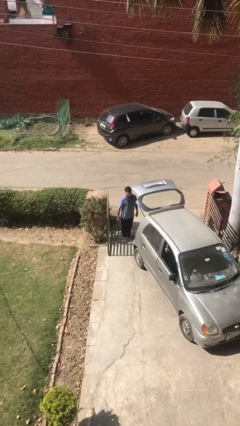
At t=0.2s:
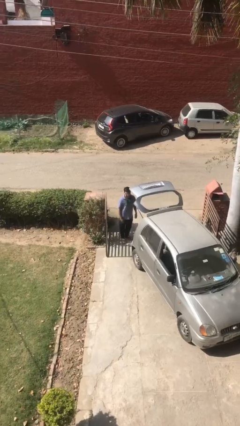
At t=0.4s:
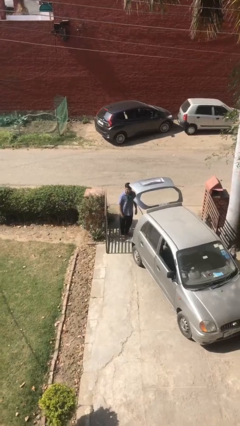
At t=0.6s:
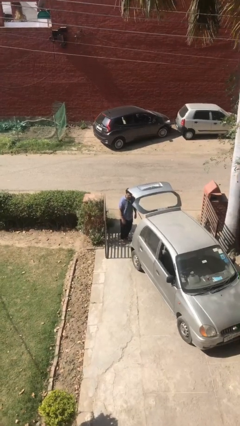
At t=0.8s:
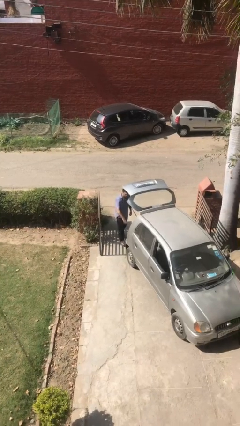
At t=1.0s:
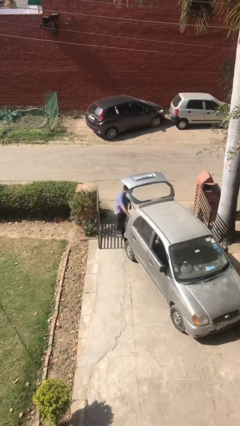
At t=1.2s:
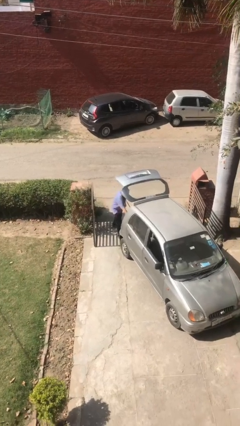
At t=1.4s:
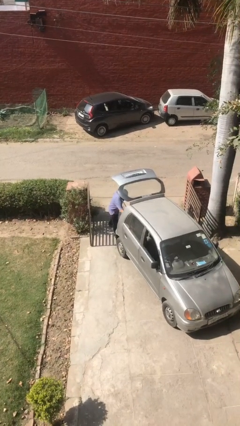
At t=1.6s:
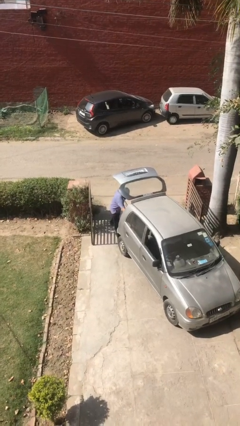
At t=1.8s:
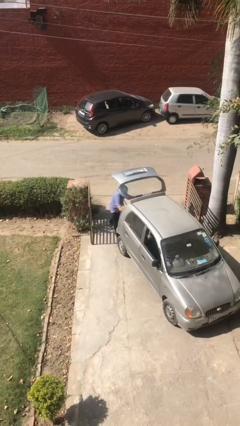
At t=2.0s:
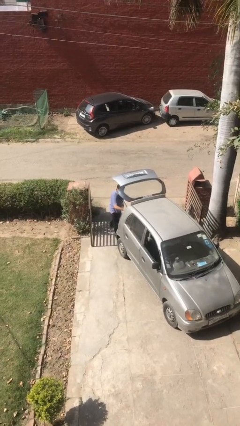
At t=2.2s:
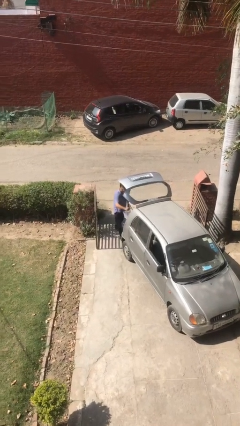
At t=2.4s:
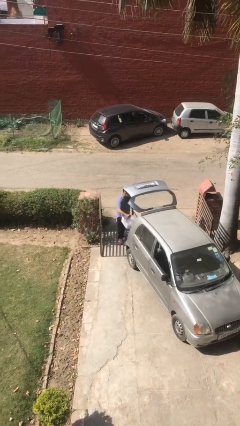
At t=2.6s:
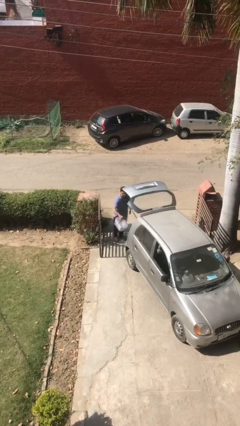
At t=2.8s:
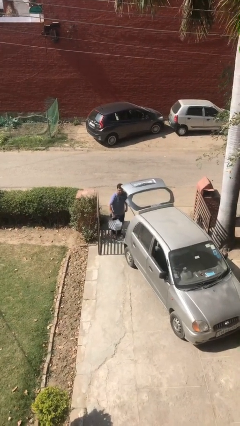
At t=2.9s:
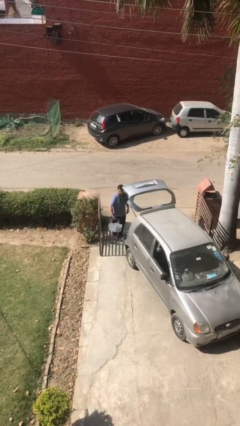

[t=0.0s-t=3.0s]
person unloads car

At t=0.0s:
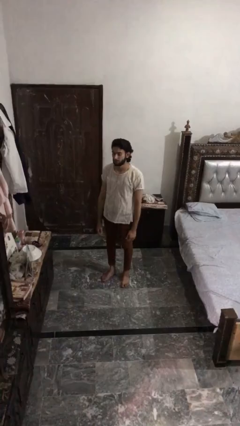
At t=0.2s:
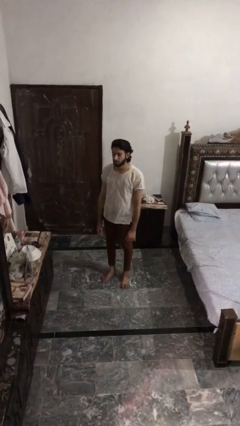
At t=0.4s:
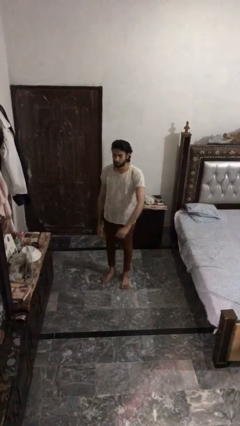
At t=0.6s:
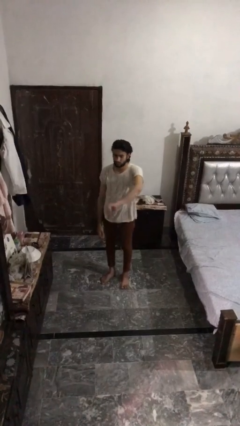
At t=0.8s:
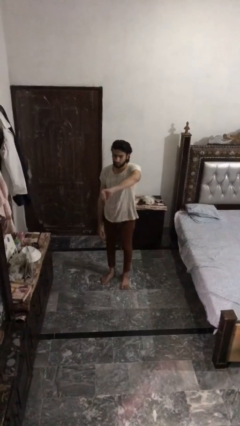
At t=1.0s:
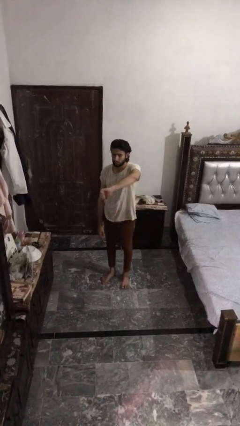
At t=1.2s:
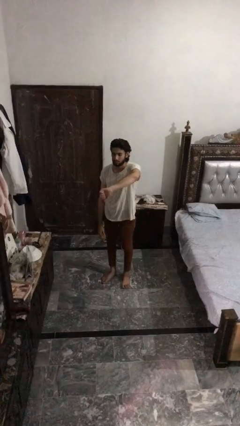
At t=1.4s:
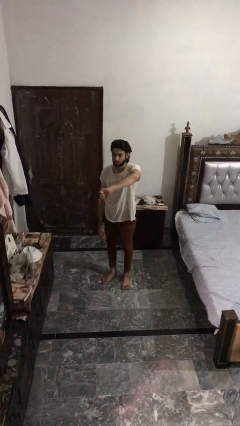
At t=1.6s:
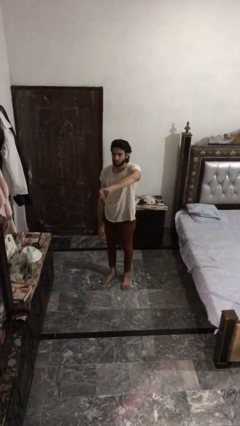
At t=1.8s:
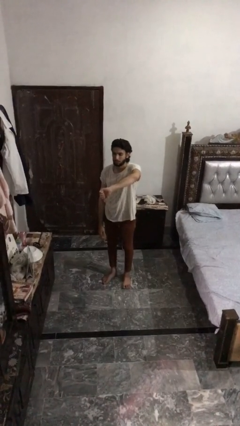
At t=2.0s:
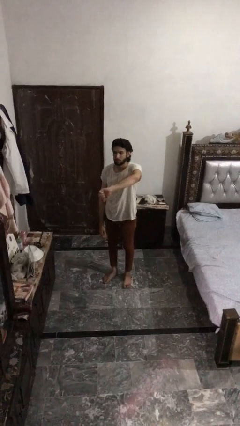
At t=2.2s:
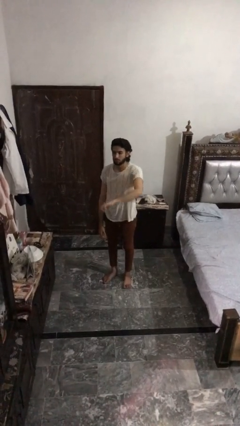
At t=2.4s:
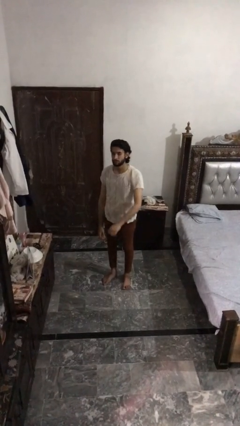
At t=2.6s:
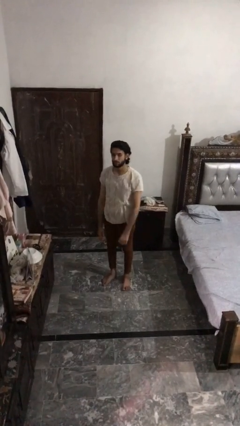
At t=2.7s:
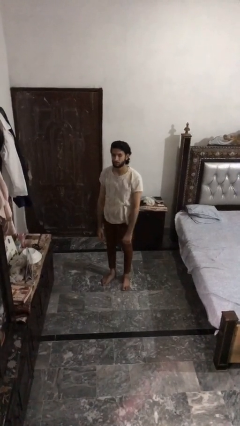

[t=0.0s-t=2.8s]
person gestures thumbs down

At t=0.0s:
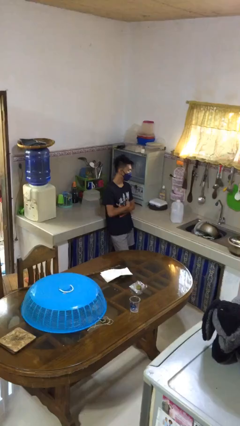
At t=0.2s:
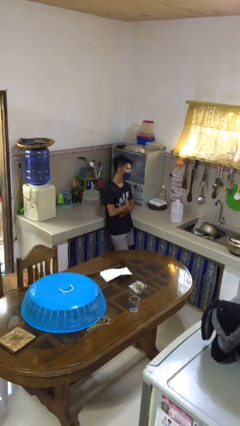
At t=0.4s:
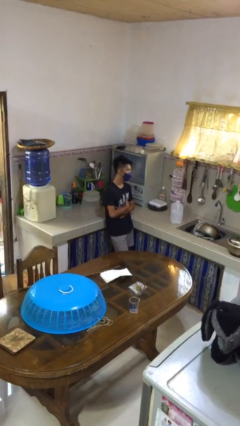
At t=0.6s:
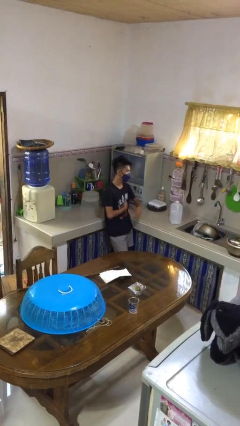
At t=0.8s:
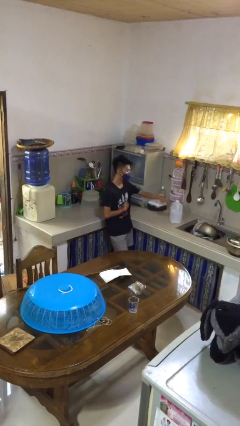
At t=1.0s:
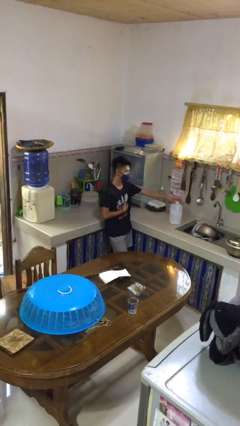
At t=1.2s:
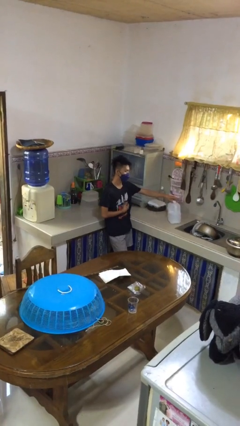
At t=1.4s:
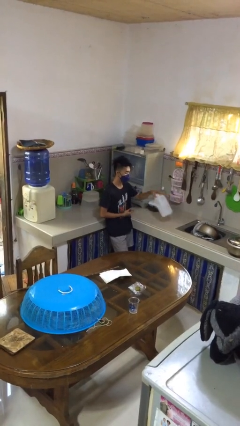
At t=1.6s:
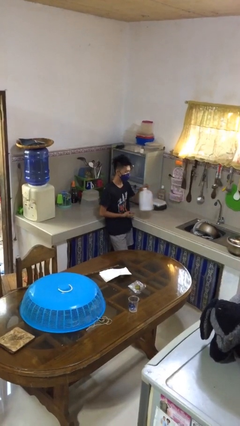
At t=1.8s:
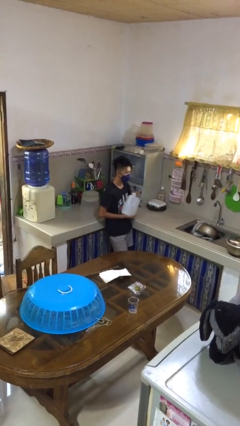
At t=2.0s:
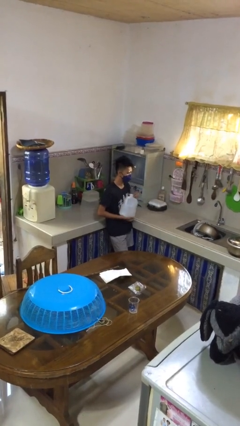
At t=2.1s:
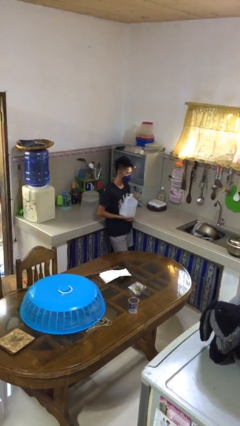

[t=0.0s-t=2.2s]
person puts down object on countertop

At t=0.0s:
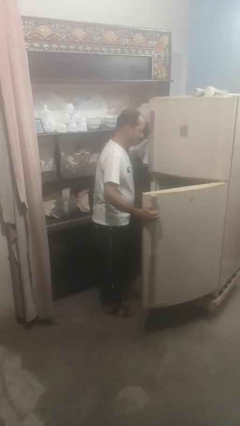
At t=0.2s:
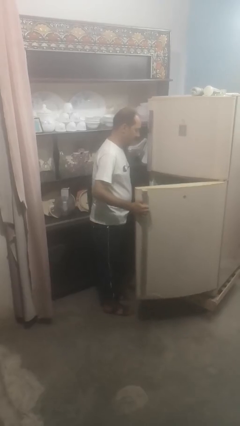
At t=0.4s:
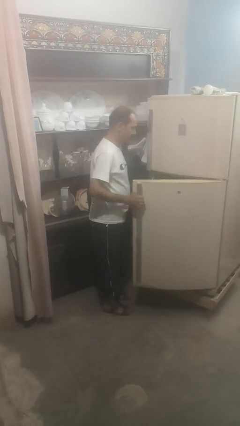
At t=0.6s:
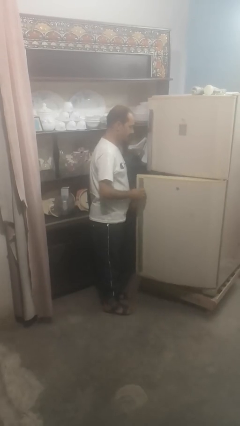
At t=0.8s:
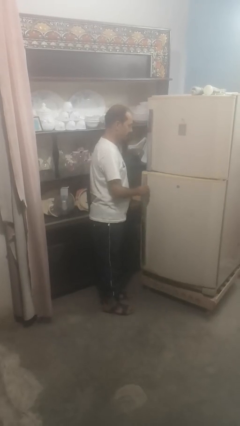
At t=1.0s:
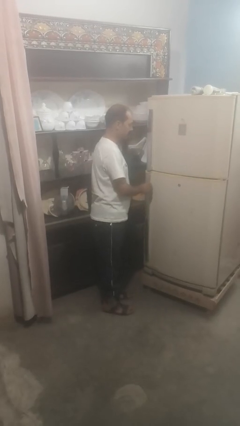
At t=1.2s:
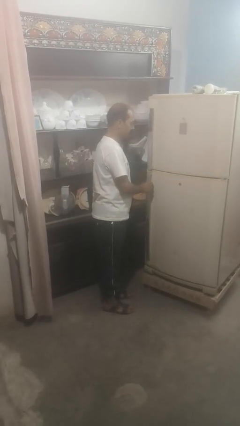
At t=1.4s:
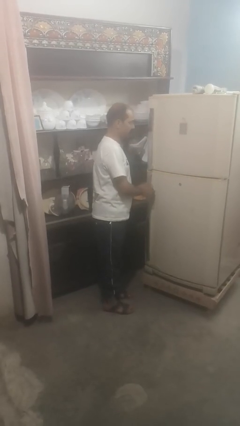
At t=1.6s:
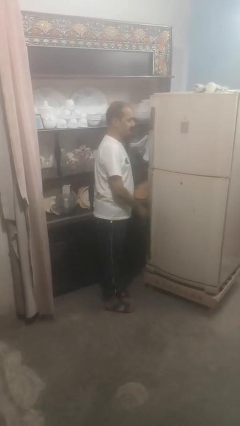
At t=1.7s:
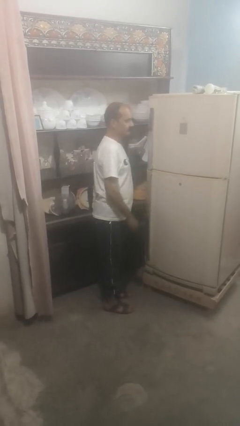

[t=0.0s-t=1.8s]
person closes refrigerator

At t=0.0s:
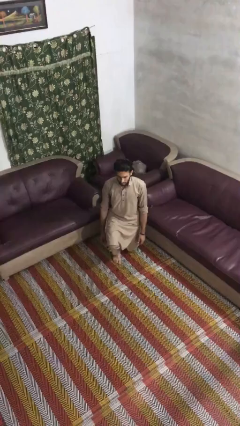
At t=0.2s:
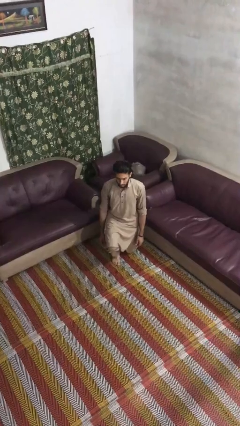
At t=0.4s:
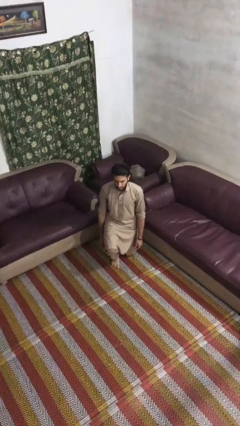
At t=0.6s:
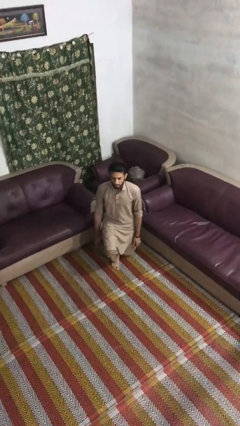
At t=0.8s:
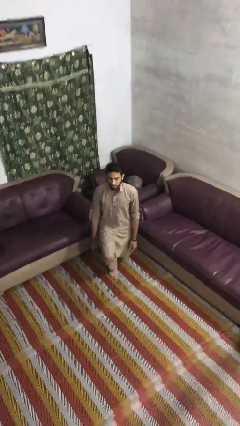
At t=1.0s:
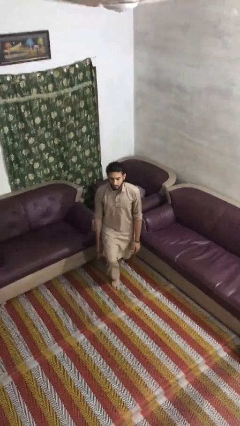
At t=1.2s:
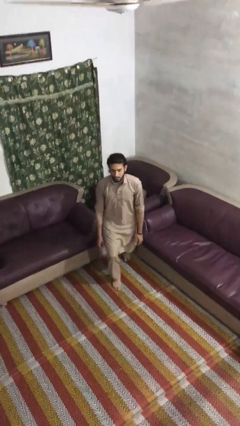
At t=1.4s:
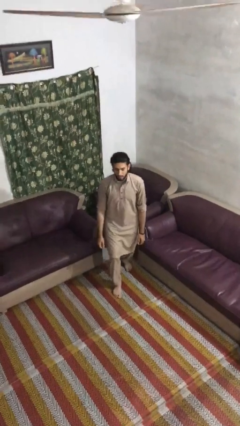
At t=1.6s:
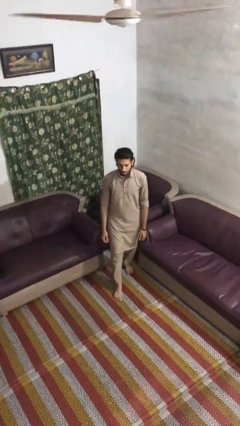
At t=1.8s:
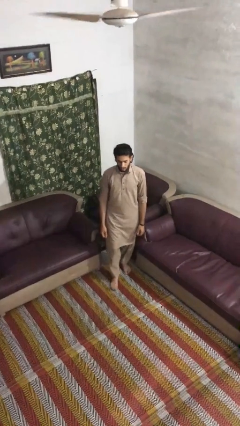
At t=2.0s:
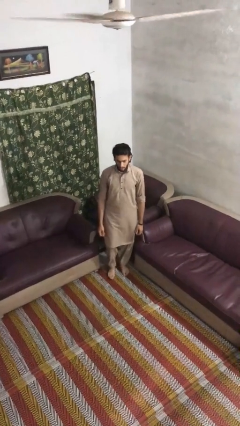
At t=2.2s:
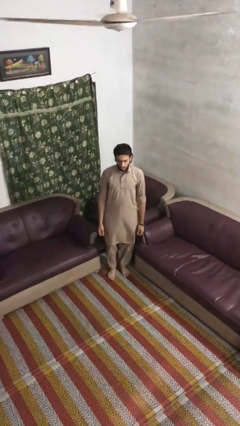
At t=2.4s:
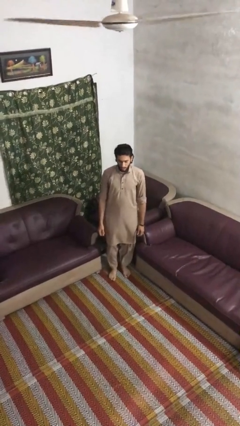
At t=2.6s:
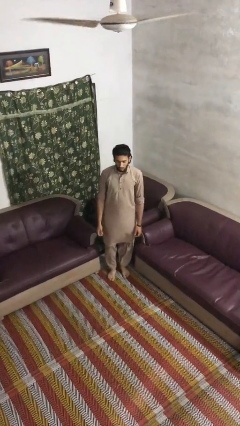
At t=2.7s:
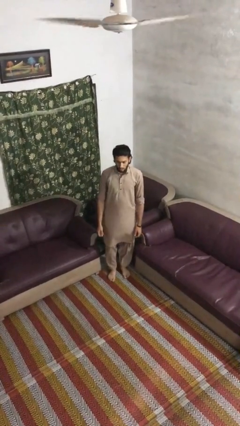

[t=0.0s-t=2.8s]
person stands up from floor

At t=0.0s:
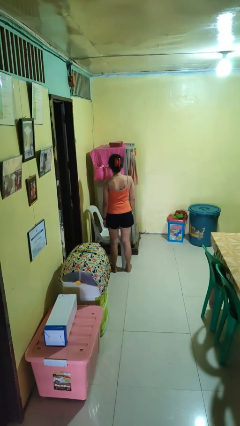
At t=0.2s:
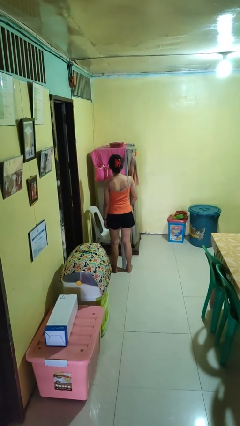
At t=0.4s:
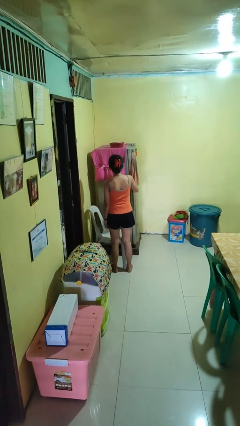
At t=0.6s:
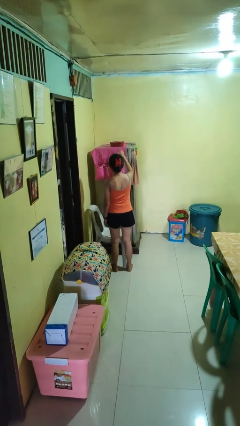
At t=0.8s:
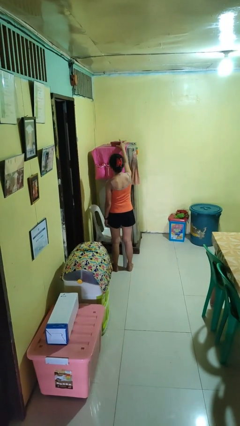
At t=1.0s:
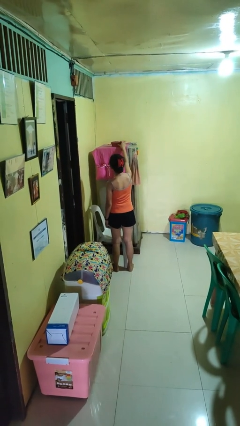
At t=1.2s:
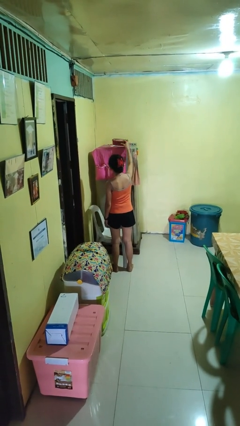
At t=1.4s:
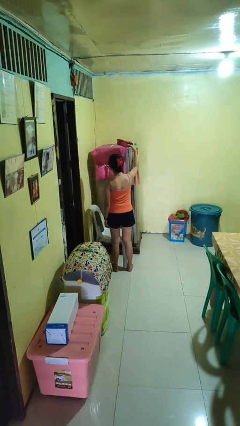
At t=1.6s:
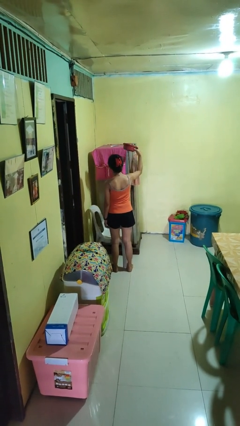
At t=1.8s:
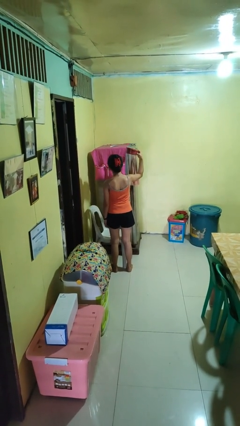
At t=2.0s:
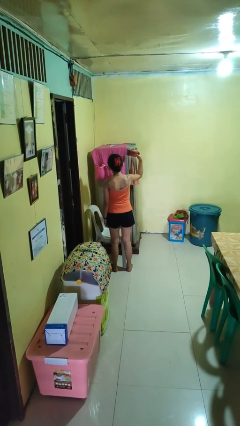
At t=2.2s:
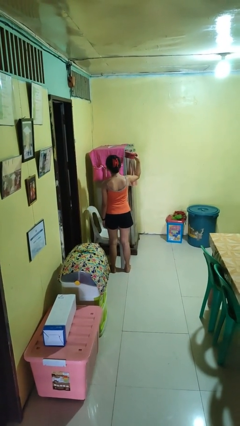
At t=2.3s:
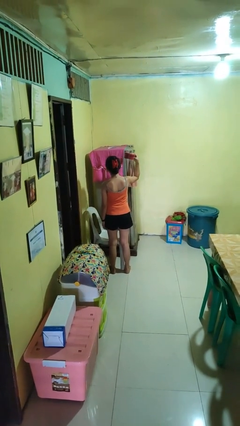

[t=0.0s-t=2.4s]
person picks up object from shelf

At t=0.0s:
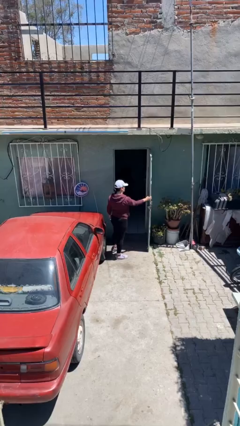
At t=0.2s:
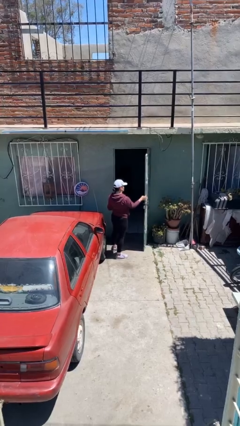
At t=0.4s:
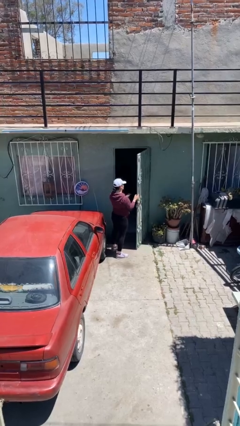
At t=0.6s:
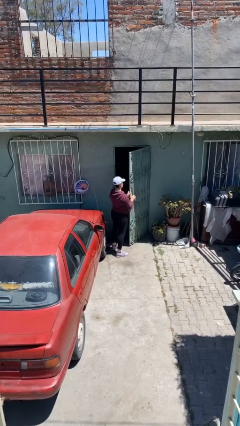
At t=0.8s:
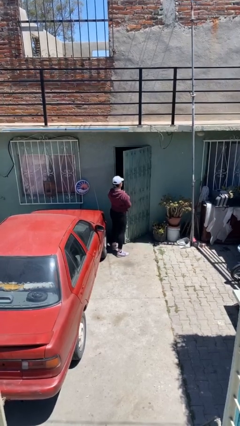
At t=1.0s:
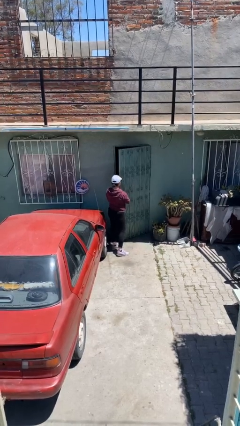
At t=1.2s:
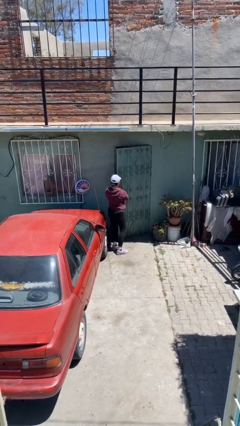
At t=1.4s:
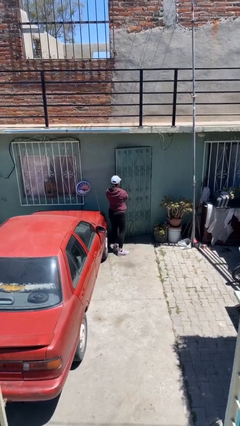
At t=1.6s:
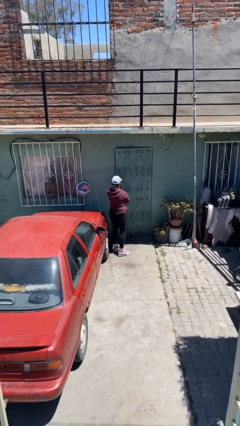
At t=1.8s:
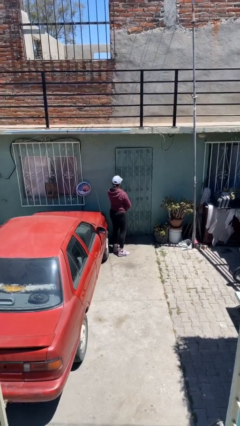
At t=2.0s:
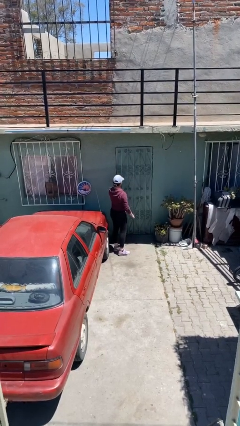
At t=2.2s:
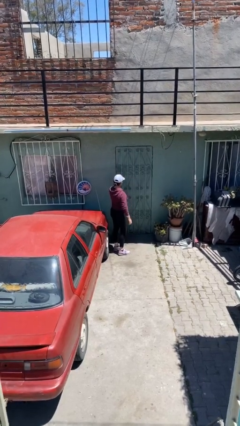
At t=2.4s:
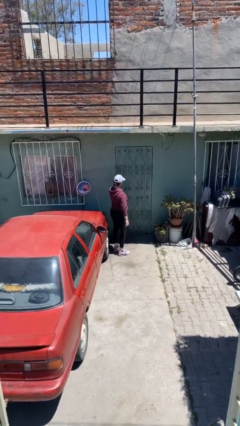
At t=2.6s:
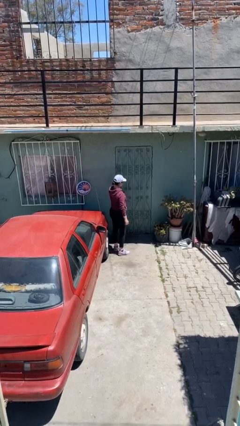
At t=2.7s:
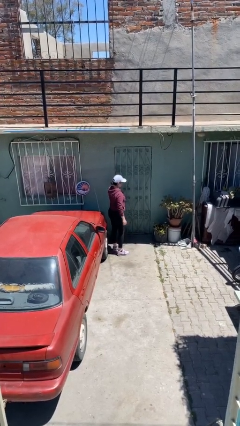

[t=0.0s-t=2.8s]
person closes facility door
